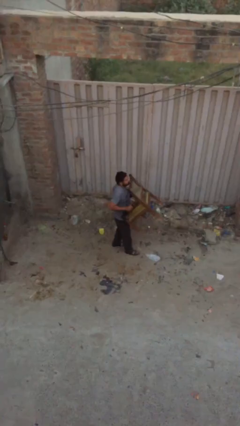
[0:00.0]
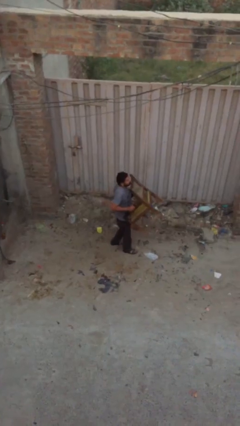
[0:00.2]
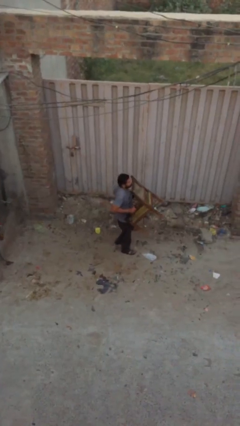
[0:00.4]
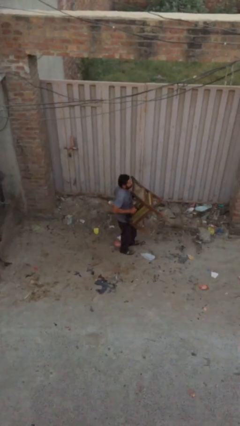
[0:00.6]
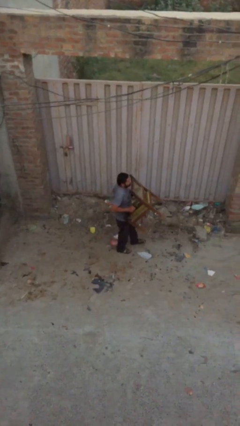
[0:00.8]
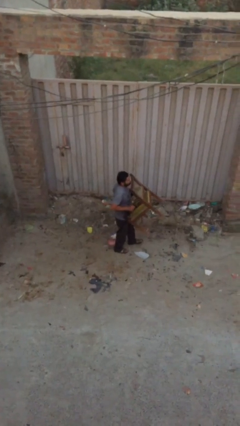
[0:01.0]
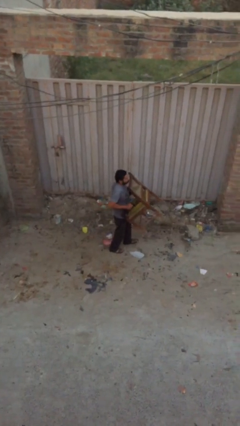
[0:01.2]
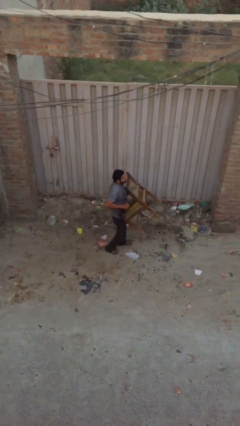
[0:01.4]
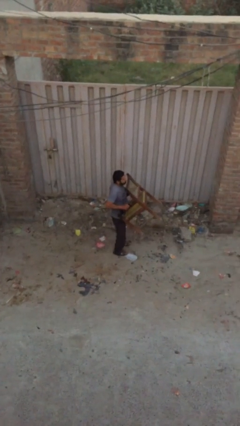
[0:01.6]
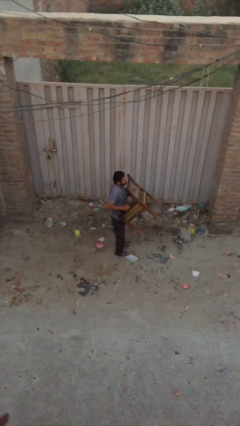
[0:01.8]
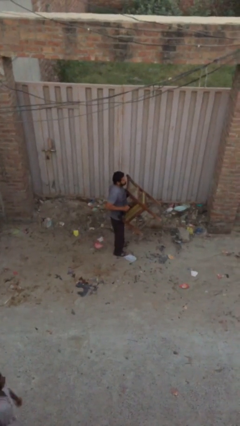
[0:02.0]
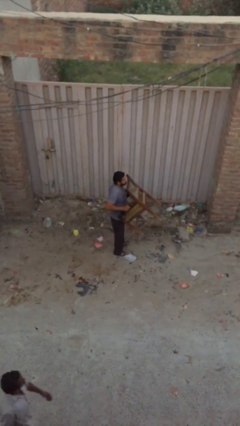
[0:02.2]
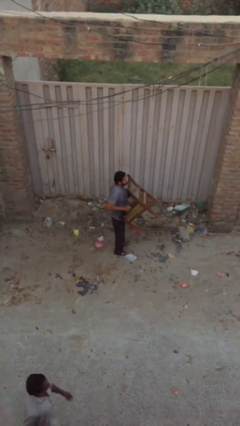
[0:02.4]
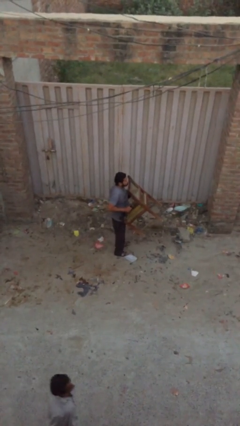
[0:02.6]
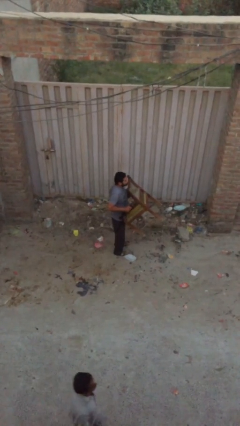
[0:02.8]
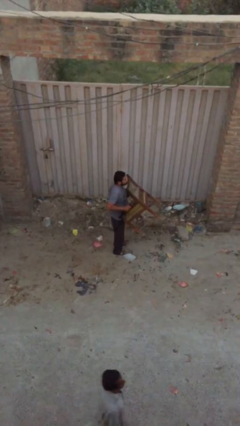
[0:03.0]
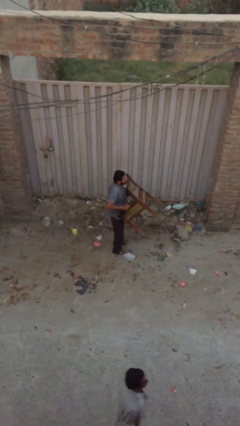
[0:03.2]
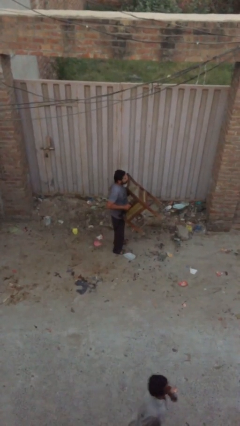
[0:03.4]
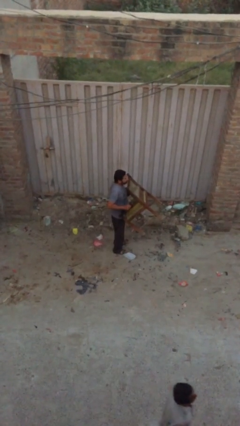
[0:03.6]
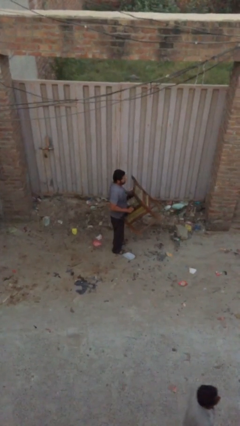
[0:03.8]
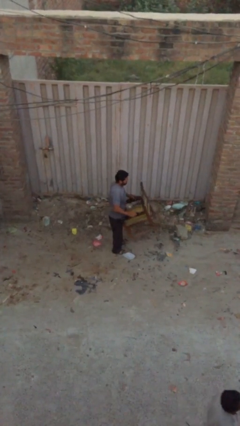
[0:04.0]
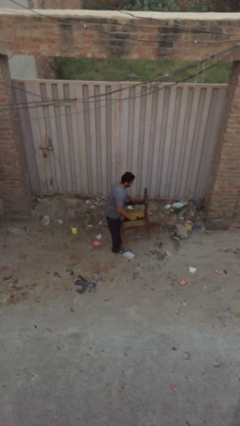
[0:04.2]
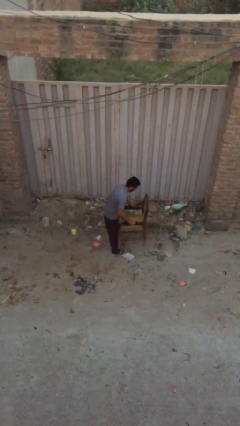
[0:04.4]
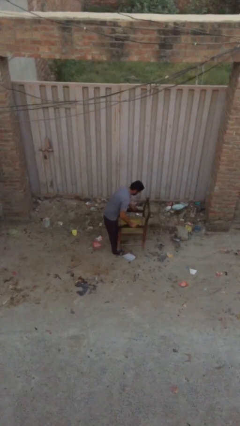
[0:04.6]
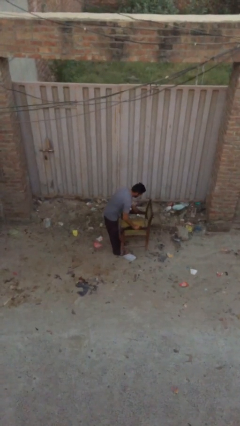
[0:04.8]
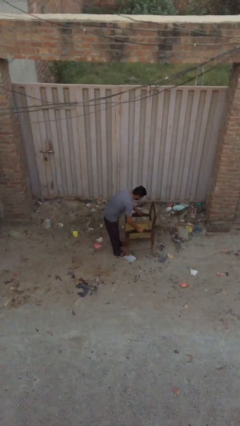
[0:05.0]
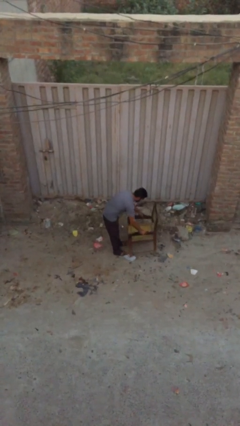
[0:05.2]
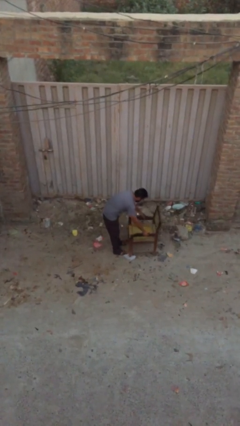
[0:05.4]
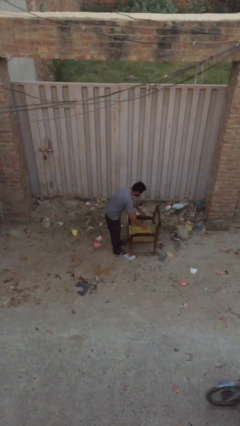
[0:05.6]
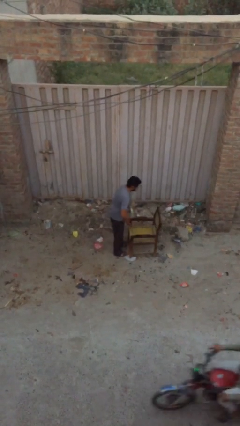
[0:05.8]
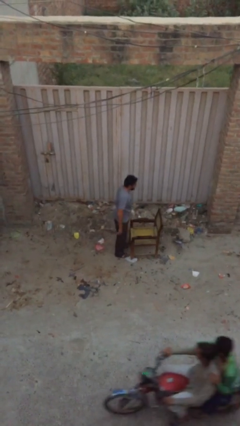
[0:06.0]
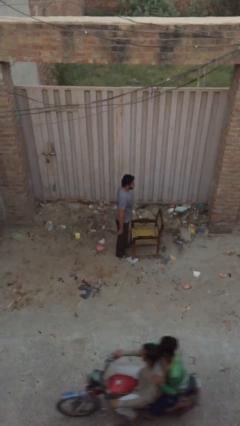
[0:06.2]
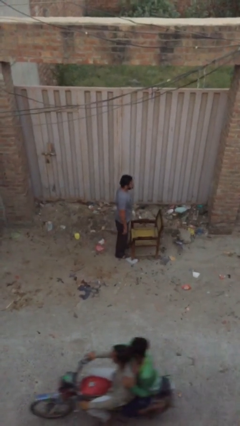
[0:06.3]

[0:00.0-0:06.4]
person puts down object on floor

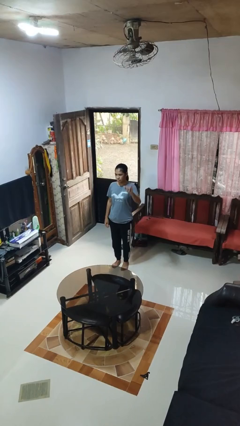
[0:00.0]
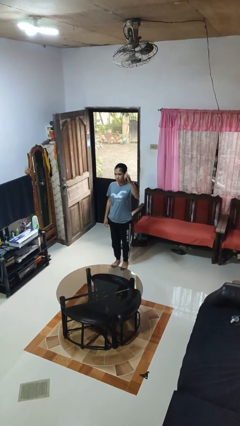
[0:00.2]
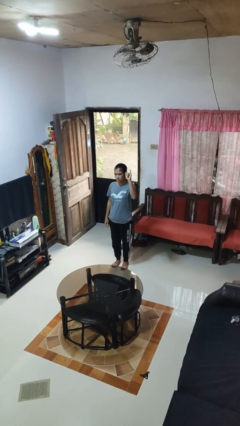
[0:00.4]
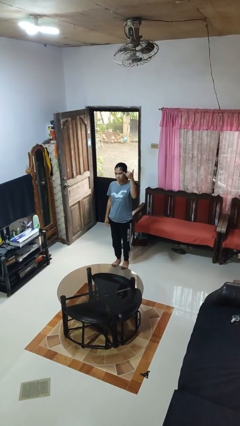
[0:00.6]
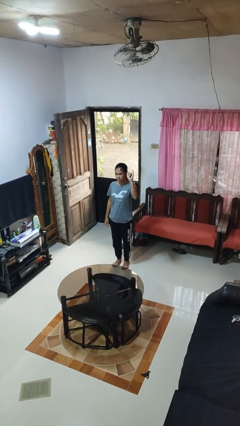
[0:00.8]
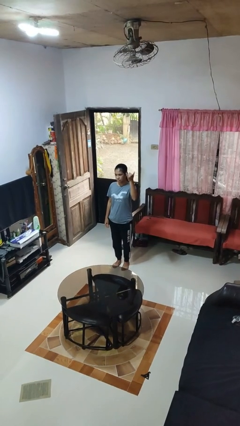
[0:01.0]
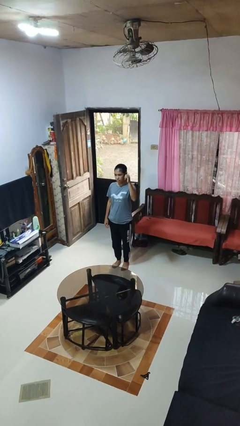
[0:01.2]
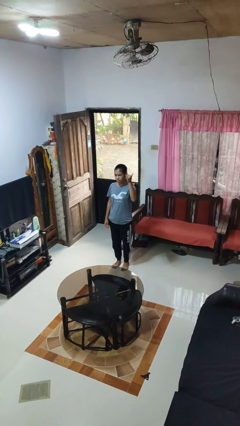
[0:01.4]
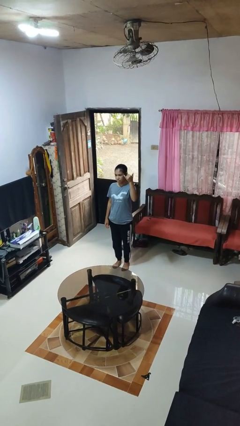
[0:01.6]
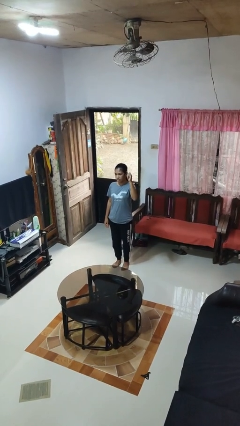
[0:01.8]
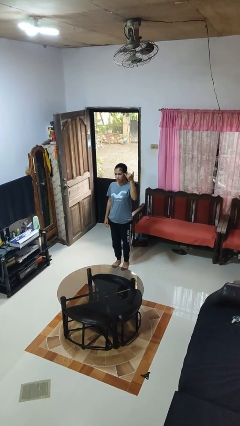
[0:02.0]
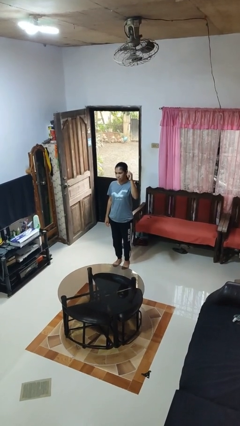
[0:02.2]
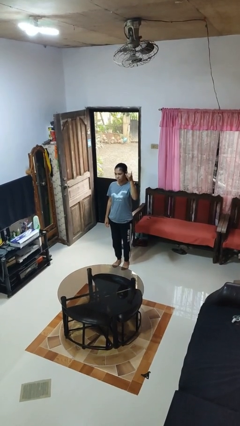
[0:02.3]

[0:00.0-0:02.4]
person gestures hang loose

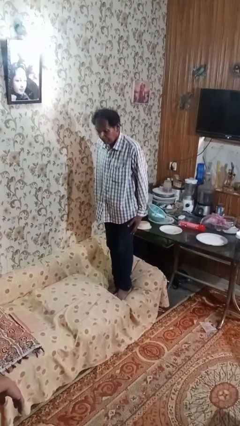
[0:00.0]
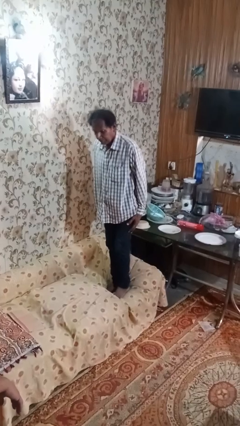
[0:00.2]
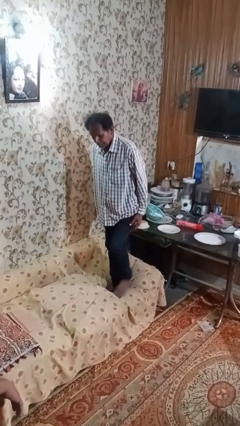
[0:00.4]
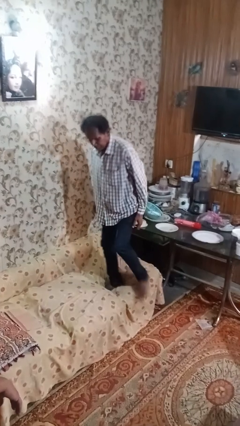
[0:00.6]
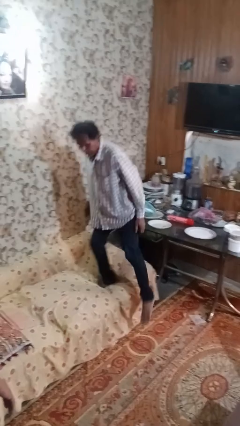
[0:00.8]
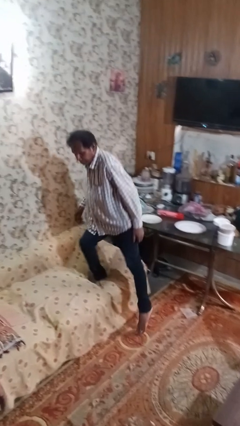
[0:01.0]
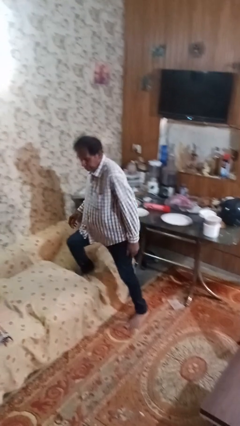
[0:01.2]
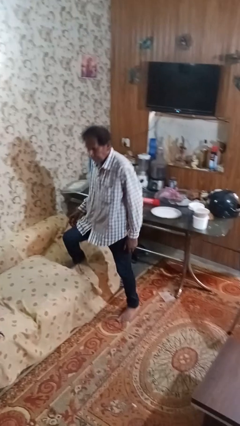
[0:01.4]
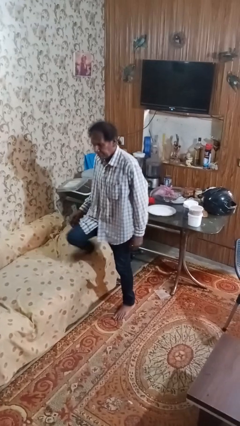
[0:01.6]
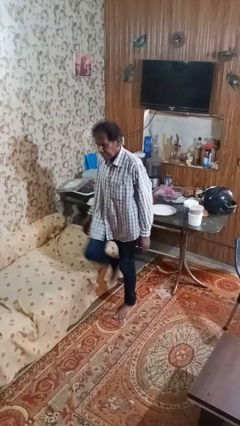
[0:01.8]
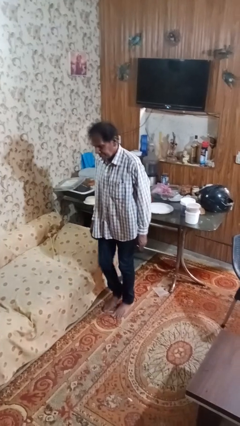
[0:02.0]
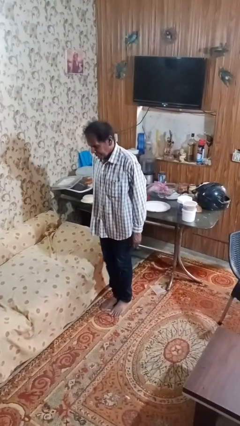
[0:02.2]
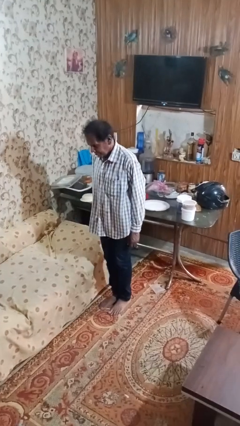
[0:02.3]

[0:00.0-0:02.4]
person climbs off couch

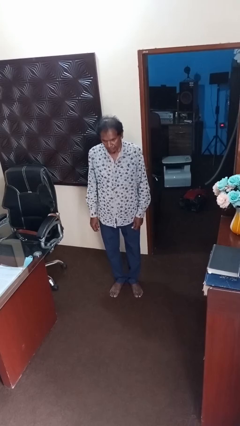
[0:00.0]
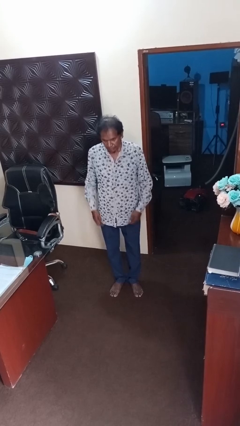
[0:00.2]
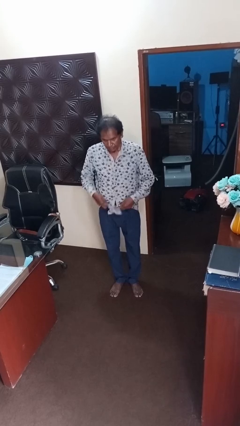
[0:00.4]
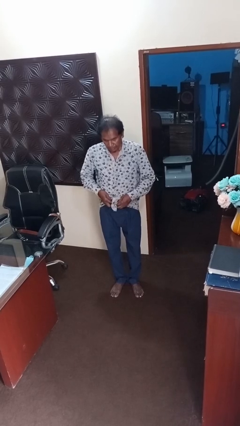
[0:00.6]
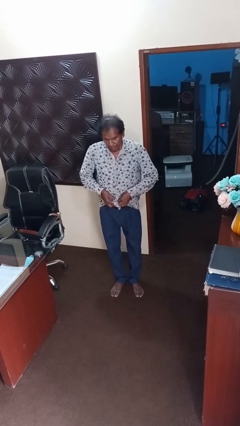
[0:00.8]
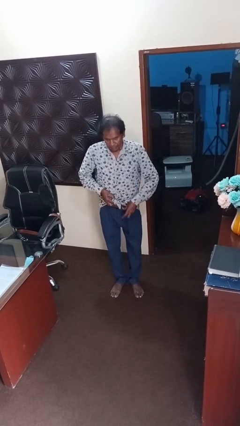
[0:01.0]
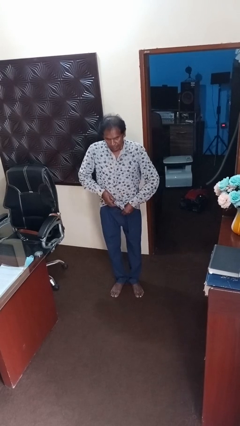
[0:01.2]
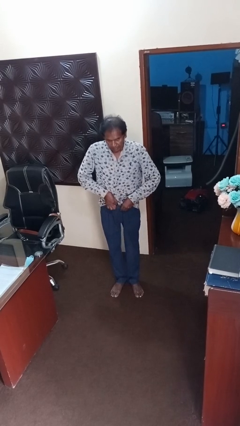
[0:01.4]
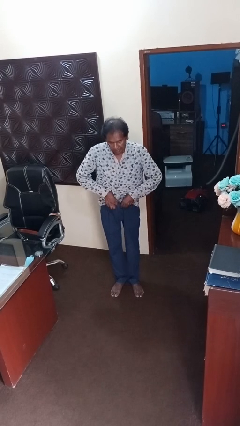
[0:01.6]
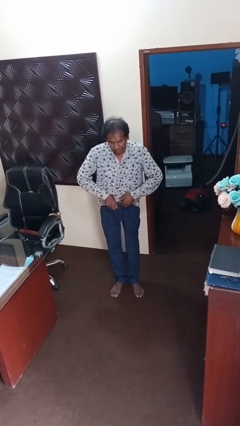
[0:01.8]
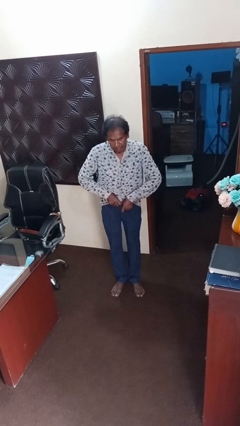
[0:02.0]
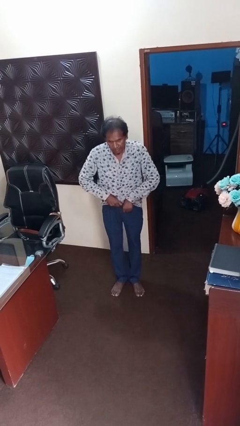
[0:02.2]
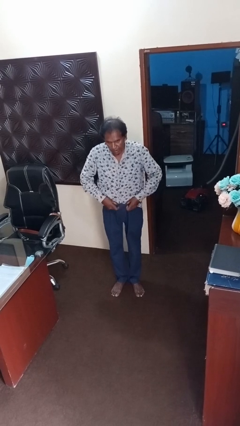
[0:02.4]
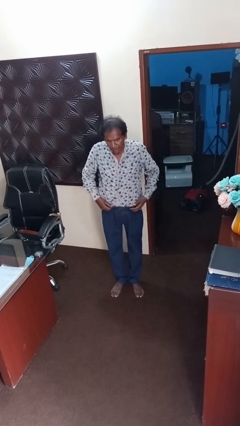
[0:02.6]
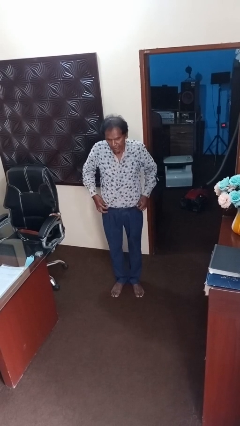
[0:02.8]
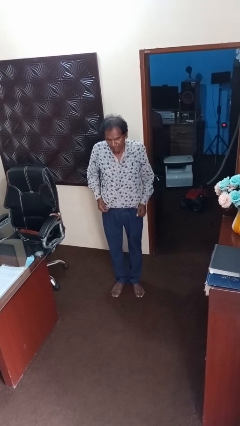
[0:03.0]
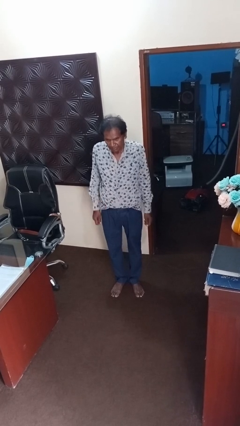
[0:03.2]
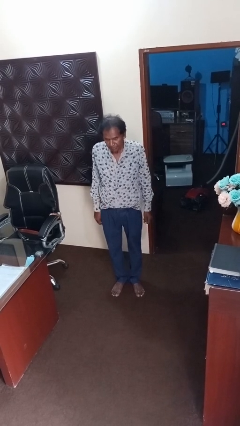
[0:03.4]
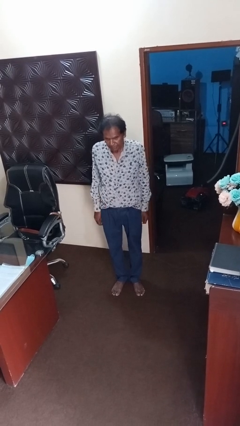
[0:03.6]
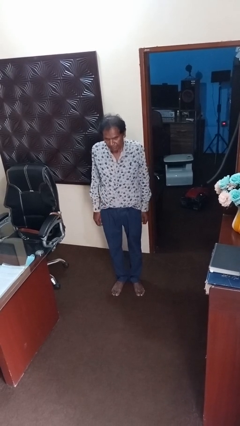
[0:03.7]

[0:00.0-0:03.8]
person tucks in shirt

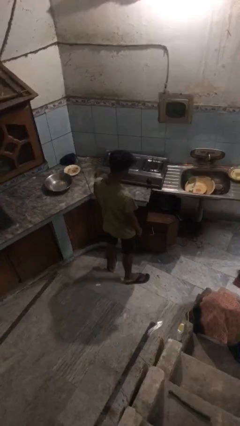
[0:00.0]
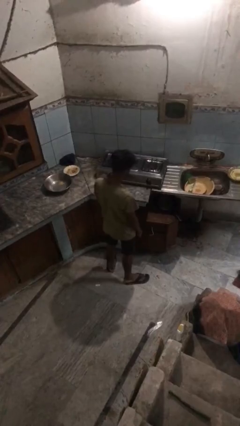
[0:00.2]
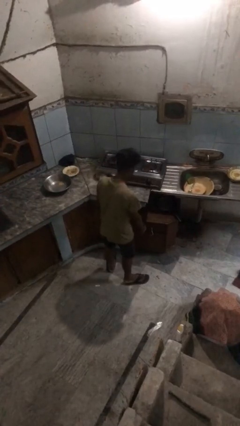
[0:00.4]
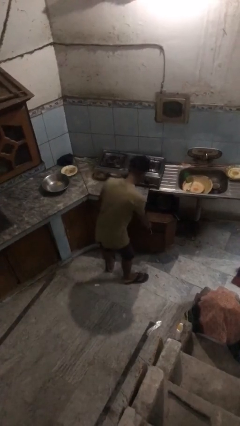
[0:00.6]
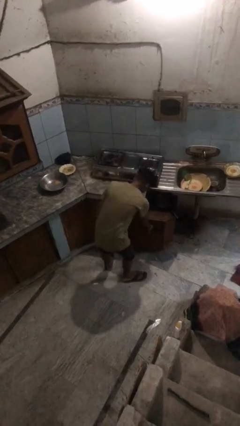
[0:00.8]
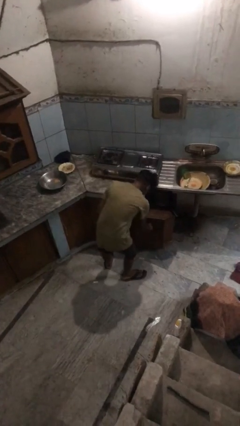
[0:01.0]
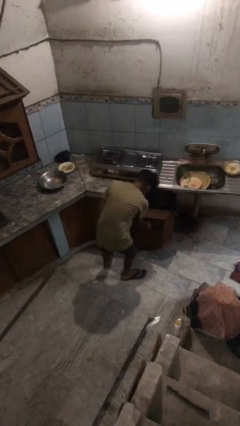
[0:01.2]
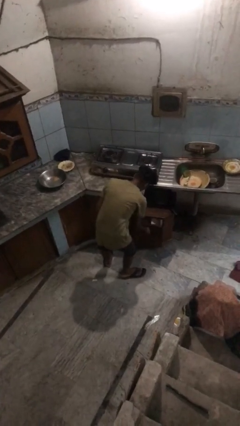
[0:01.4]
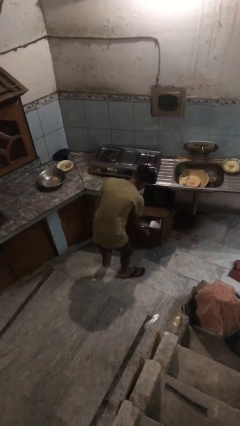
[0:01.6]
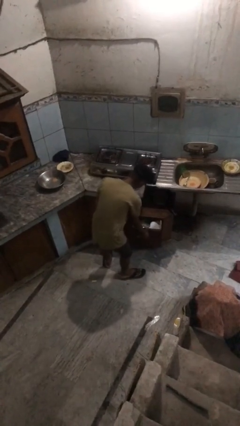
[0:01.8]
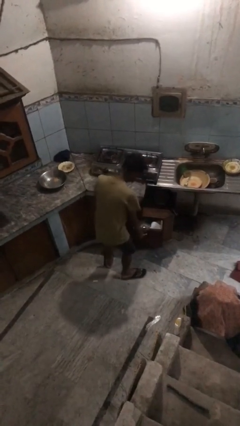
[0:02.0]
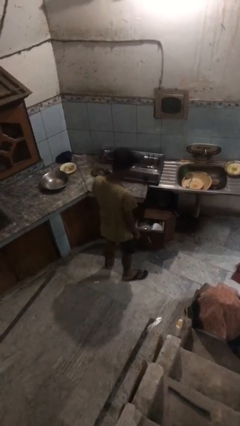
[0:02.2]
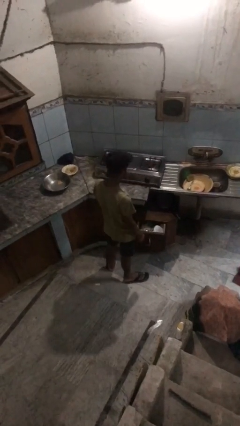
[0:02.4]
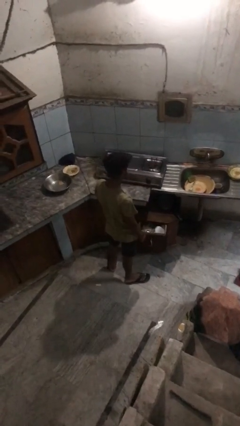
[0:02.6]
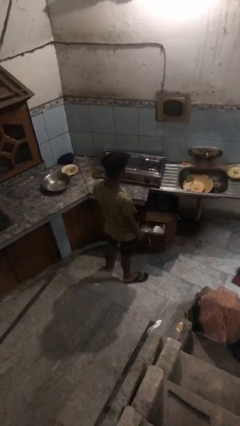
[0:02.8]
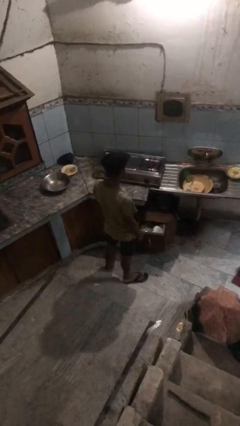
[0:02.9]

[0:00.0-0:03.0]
person opens kitchen drawer
